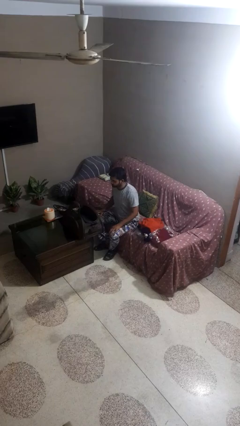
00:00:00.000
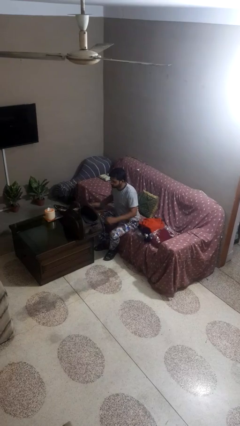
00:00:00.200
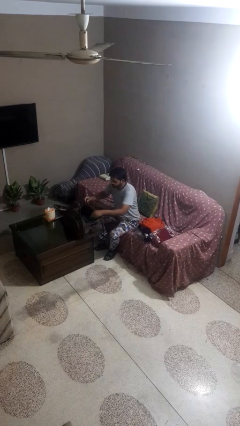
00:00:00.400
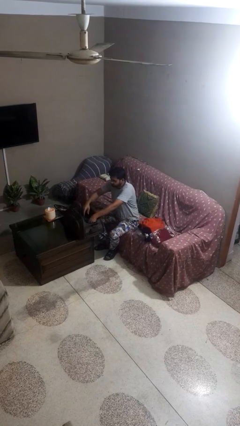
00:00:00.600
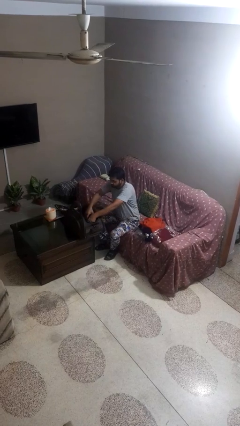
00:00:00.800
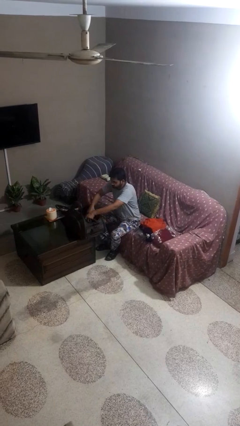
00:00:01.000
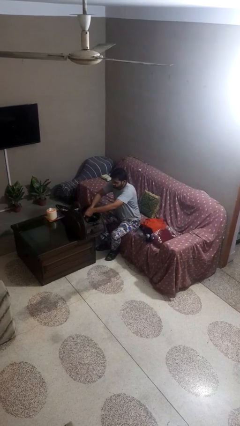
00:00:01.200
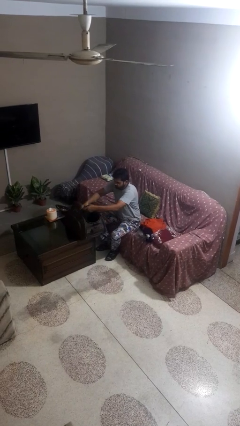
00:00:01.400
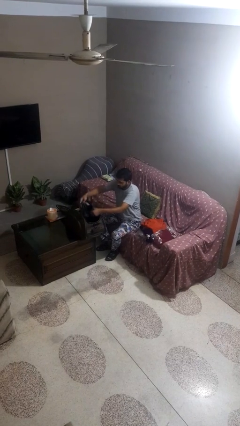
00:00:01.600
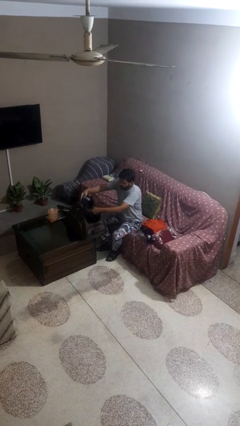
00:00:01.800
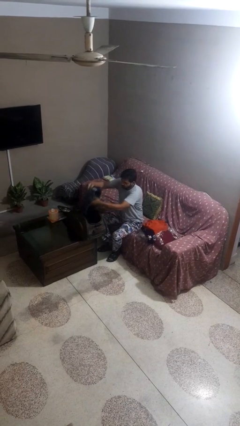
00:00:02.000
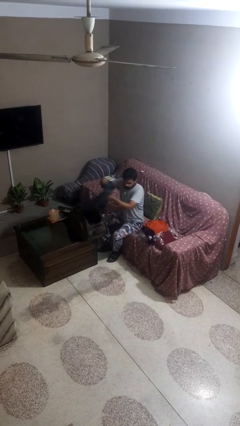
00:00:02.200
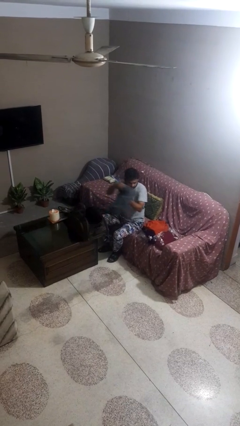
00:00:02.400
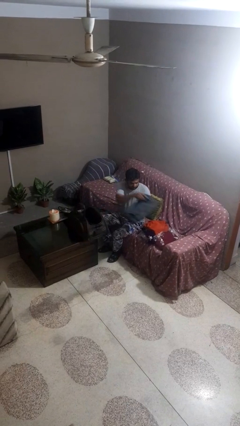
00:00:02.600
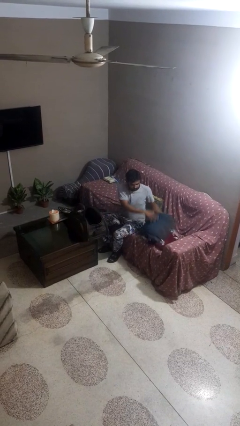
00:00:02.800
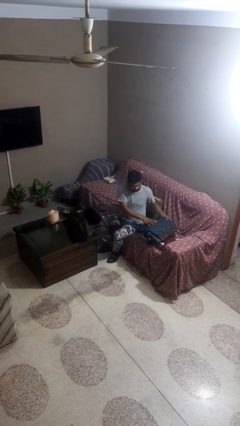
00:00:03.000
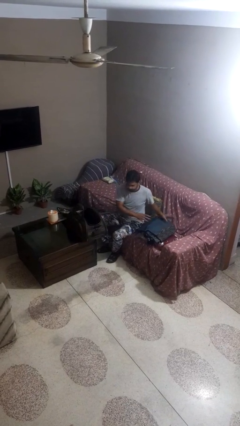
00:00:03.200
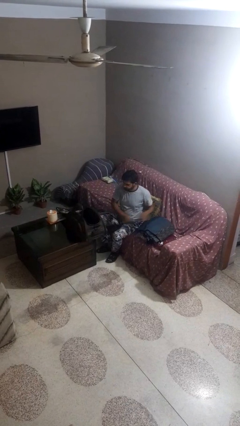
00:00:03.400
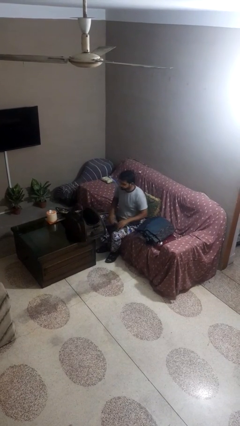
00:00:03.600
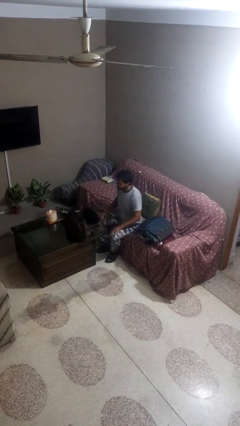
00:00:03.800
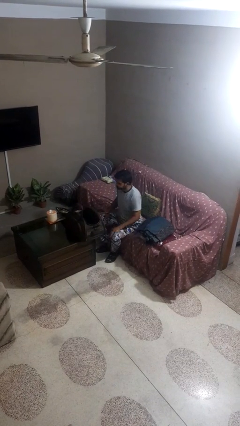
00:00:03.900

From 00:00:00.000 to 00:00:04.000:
person unloads clothes from suitcase

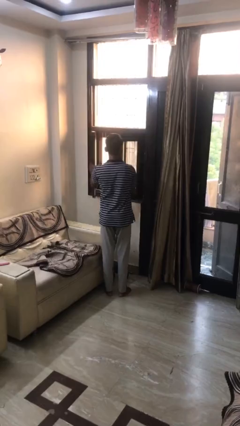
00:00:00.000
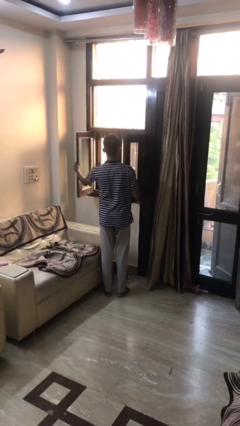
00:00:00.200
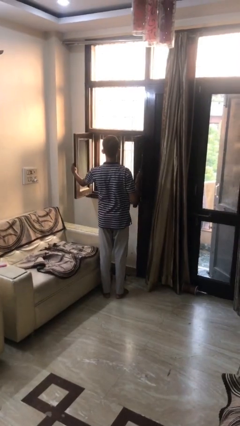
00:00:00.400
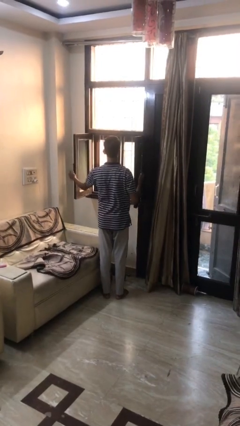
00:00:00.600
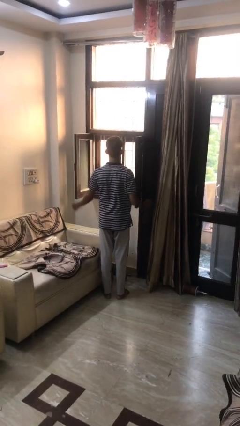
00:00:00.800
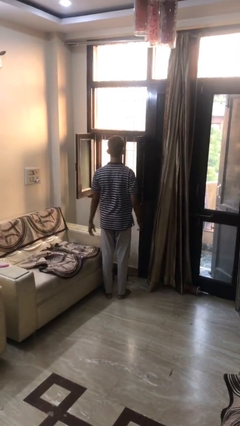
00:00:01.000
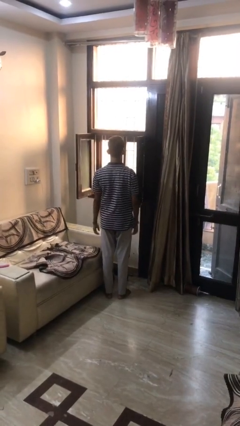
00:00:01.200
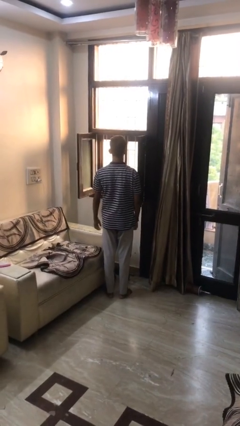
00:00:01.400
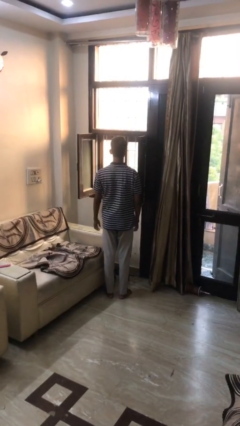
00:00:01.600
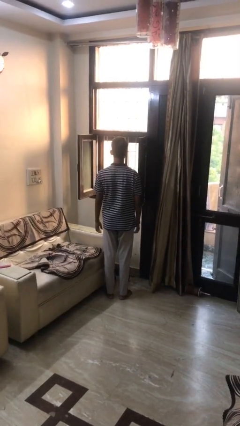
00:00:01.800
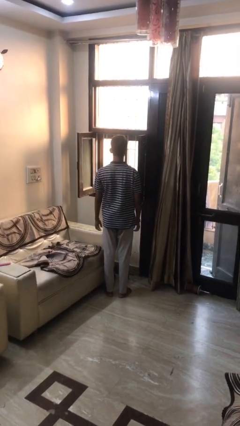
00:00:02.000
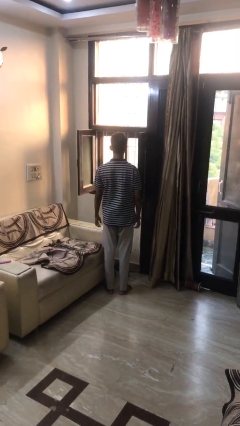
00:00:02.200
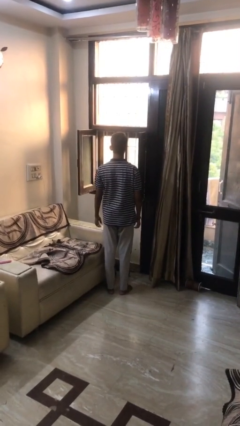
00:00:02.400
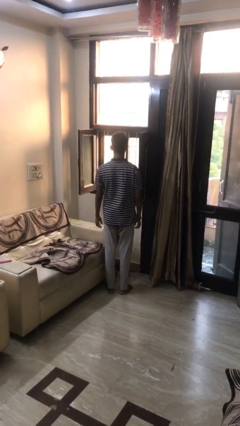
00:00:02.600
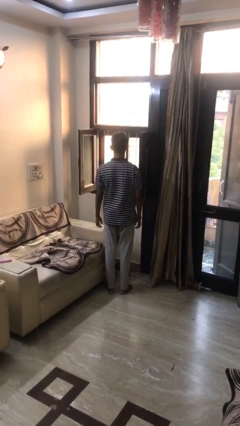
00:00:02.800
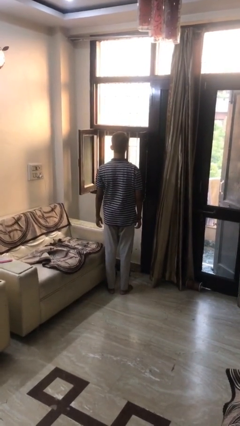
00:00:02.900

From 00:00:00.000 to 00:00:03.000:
person opens home window

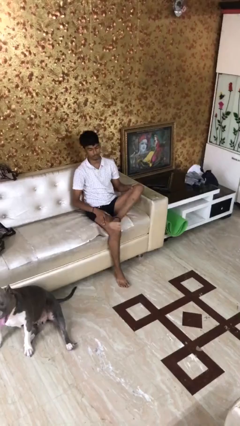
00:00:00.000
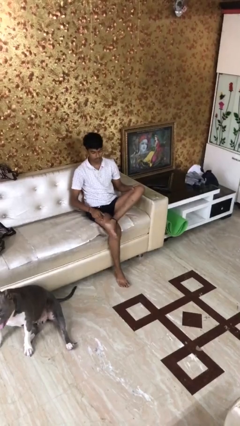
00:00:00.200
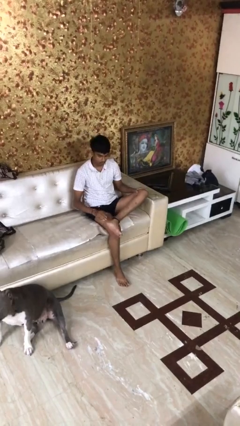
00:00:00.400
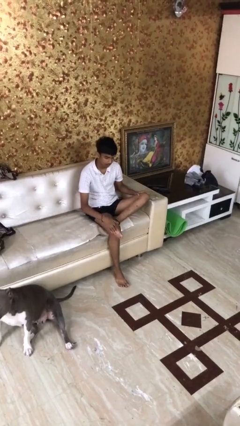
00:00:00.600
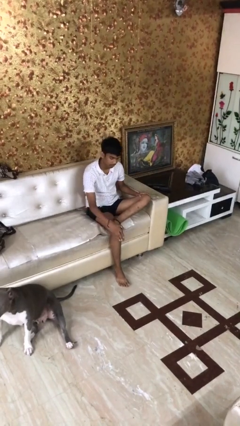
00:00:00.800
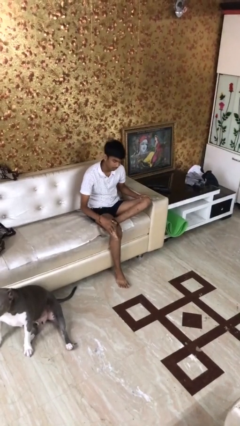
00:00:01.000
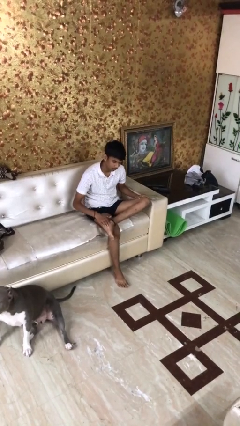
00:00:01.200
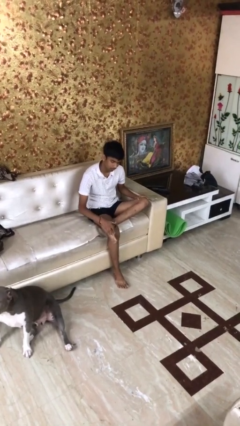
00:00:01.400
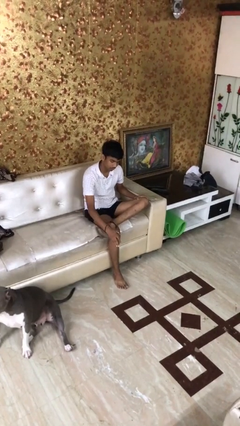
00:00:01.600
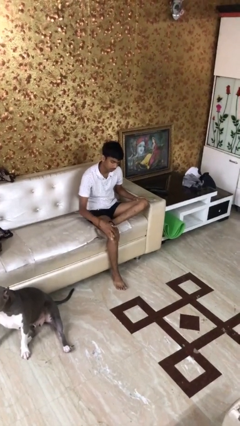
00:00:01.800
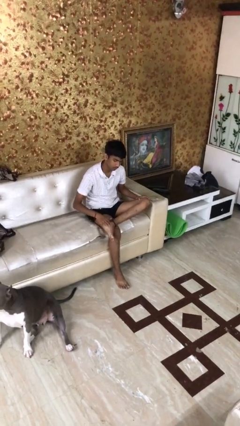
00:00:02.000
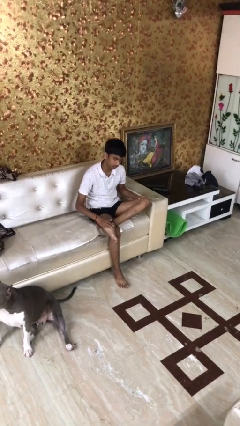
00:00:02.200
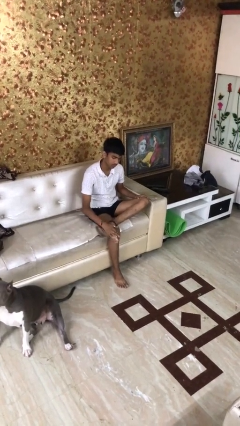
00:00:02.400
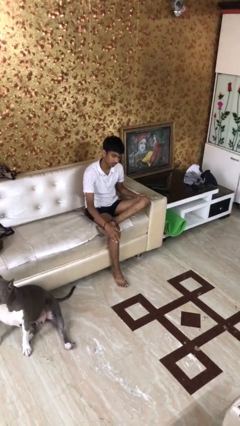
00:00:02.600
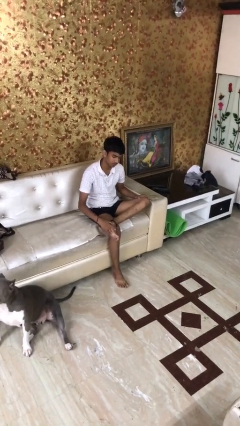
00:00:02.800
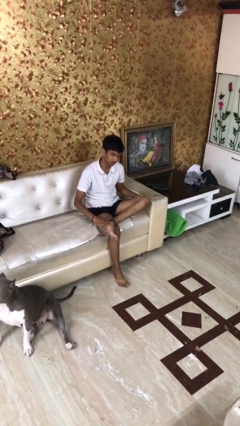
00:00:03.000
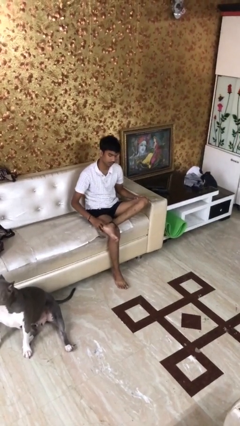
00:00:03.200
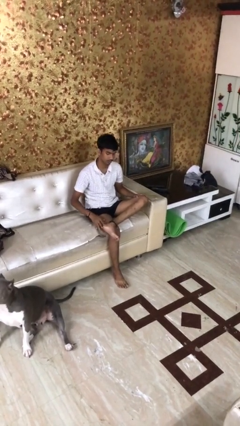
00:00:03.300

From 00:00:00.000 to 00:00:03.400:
person rubs foot

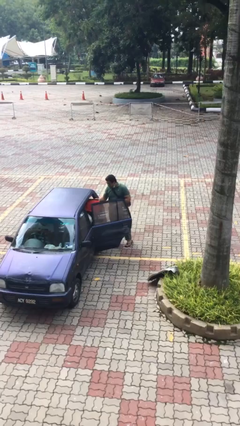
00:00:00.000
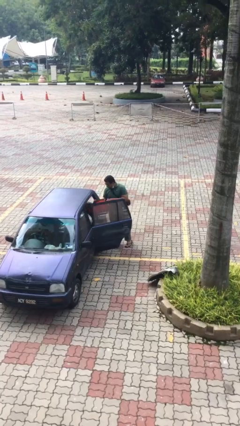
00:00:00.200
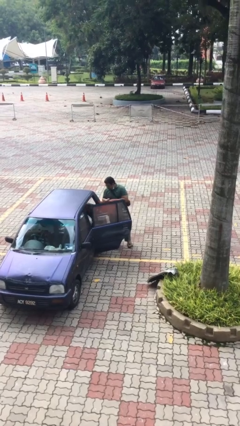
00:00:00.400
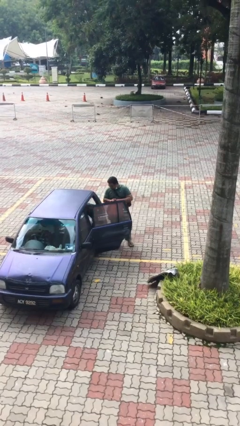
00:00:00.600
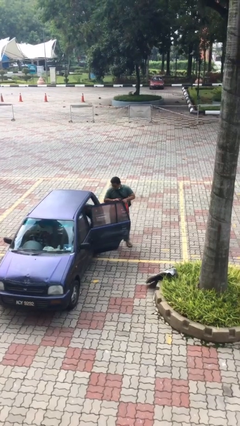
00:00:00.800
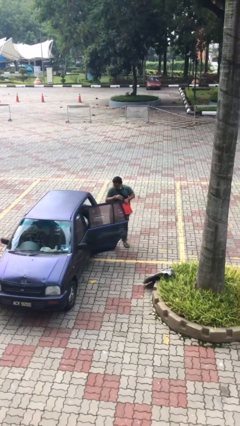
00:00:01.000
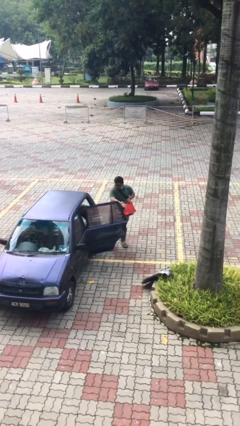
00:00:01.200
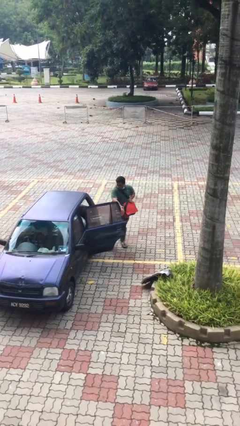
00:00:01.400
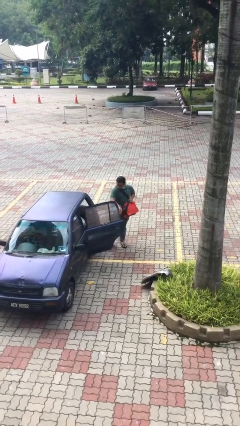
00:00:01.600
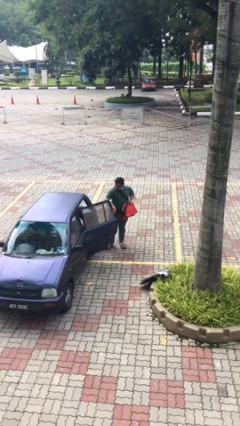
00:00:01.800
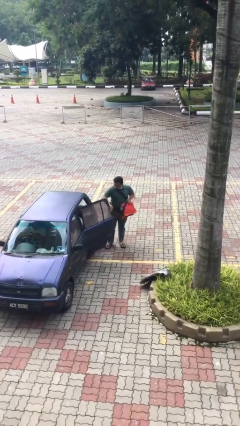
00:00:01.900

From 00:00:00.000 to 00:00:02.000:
person unloads car

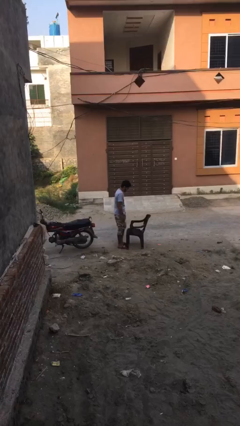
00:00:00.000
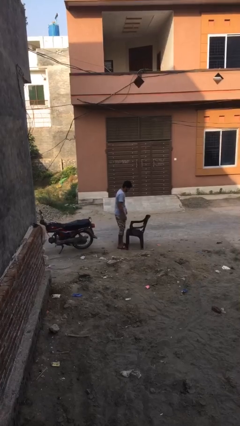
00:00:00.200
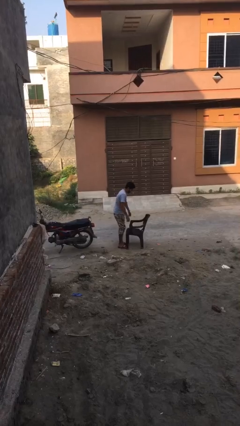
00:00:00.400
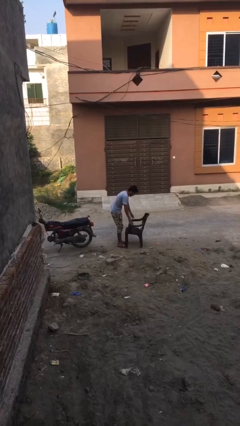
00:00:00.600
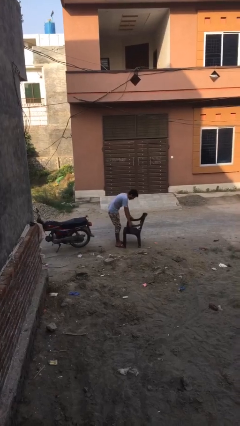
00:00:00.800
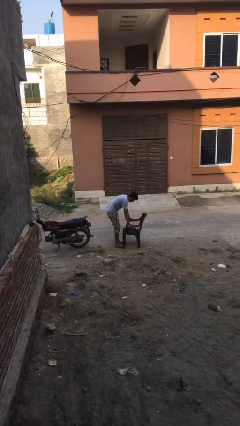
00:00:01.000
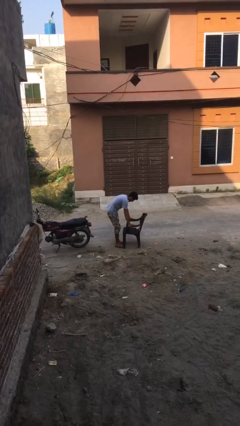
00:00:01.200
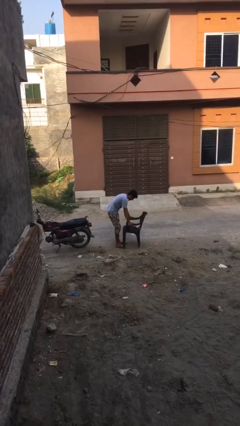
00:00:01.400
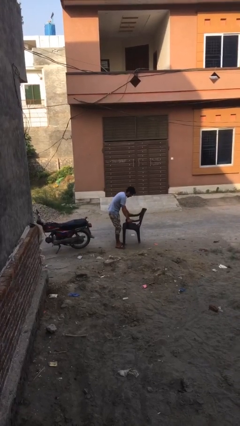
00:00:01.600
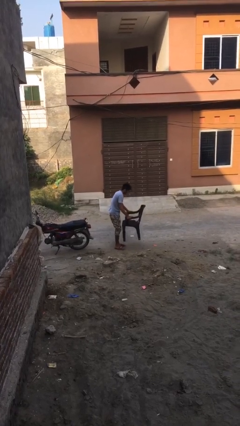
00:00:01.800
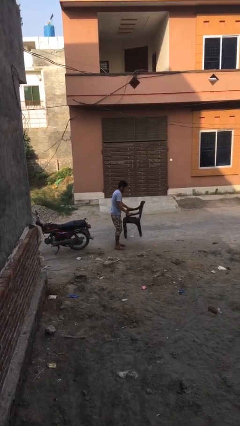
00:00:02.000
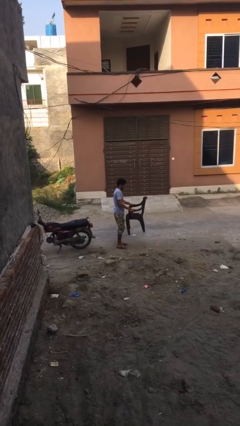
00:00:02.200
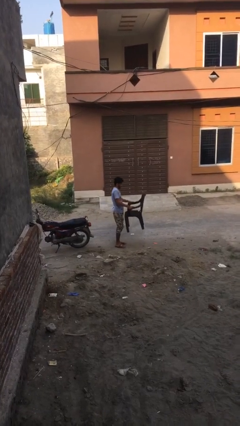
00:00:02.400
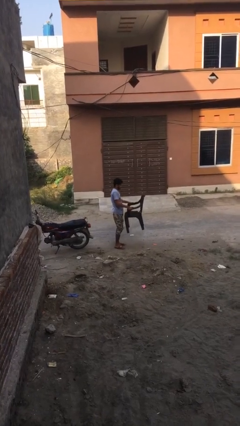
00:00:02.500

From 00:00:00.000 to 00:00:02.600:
person picks up object from floor

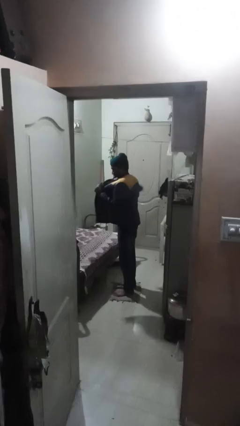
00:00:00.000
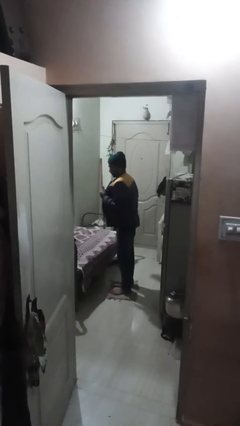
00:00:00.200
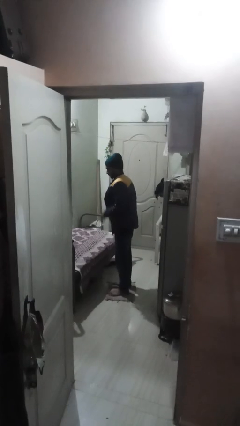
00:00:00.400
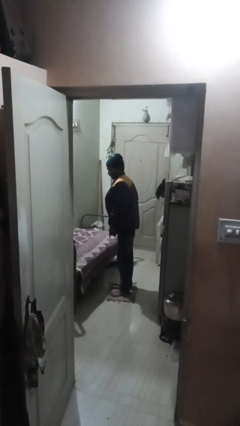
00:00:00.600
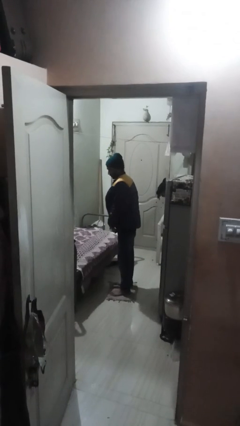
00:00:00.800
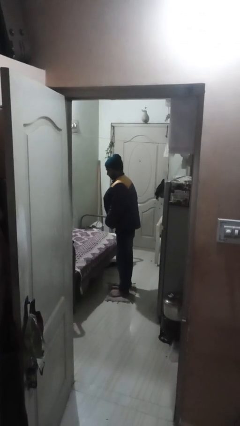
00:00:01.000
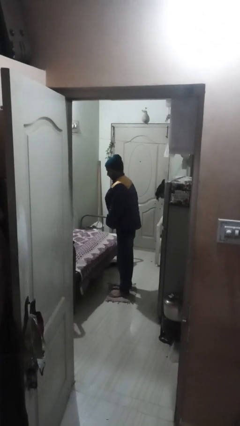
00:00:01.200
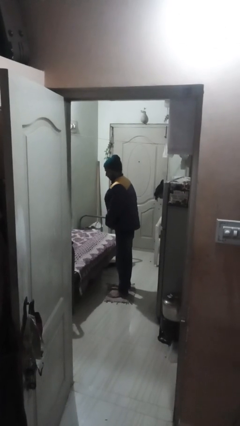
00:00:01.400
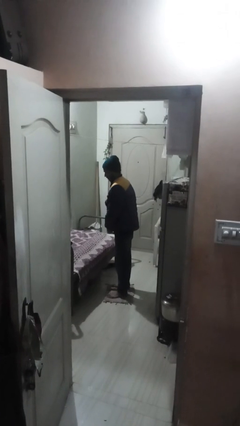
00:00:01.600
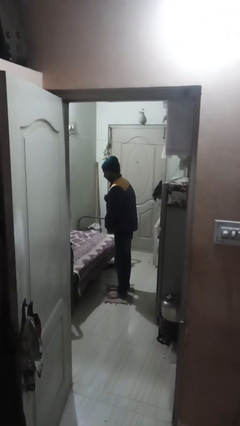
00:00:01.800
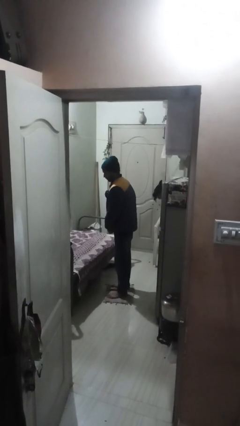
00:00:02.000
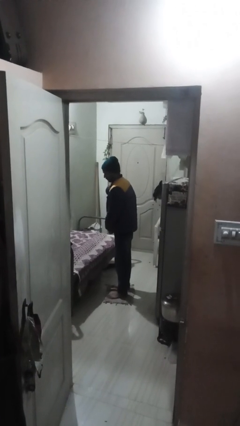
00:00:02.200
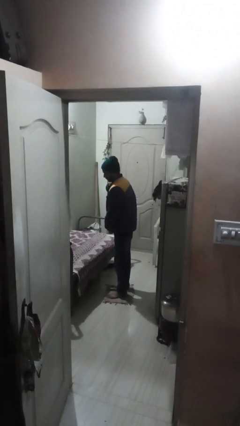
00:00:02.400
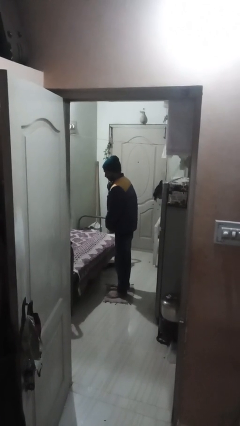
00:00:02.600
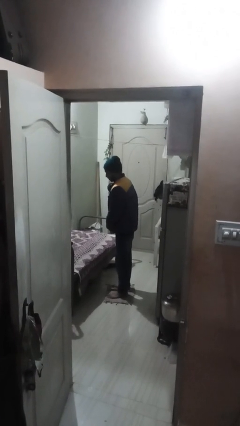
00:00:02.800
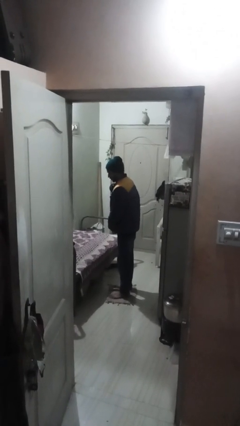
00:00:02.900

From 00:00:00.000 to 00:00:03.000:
person zips up jacket
